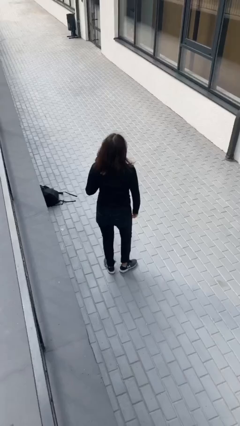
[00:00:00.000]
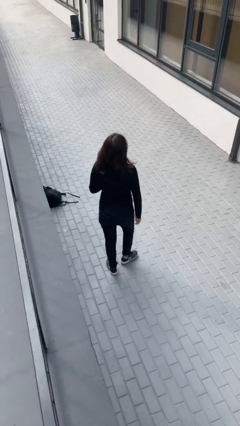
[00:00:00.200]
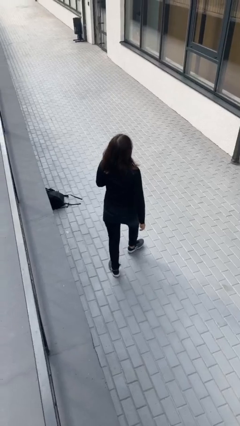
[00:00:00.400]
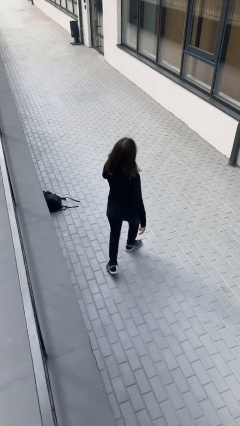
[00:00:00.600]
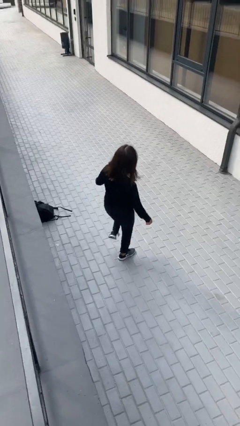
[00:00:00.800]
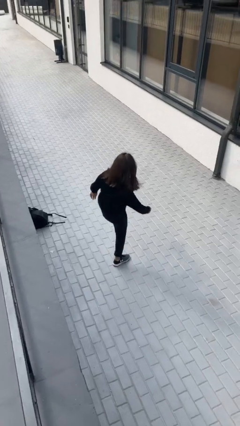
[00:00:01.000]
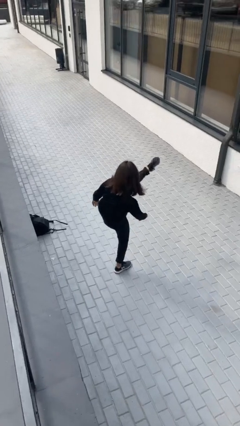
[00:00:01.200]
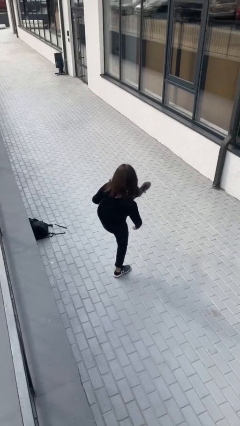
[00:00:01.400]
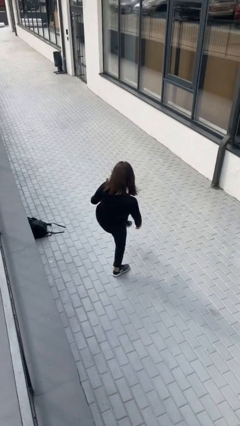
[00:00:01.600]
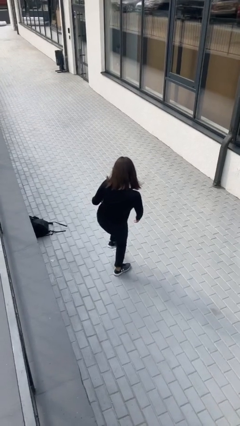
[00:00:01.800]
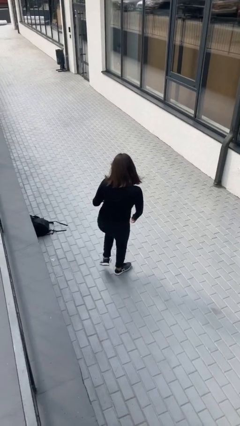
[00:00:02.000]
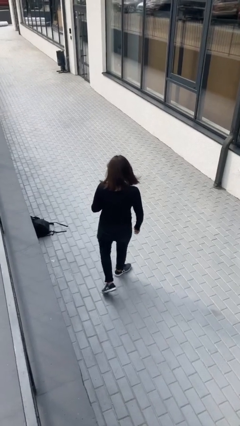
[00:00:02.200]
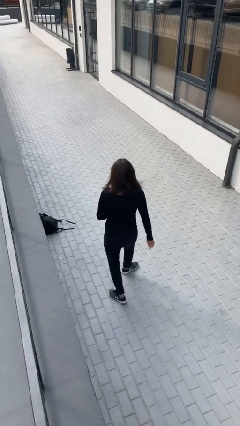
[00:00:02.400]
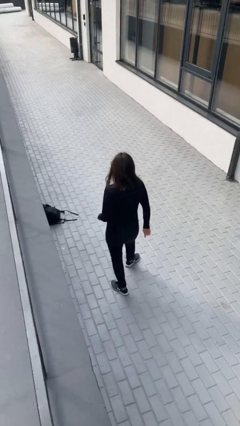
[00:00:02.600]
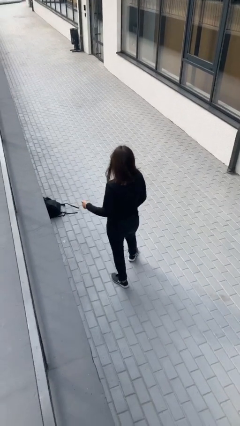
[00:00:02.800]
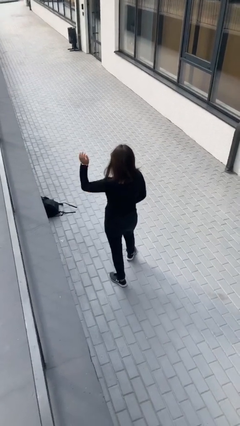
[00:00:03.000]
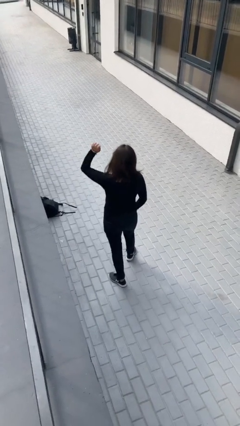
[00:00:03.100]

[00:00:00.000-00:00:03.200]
person karate kicks

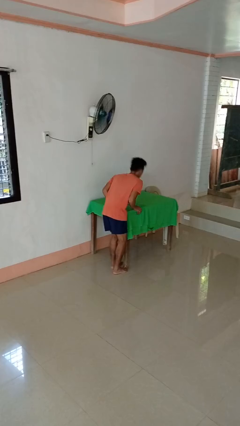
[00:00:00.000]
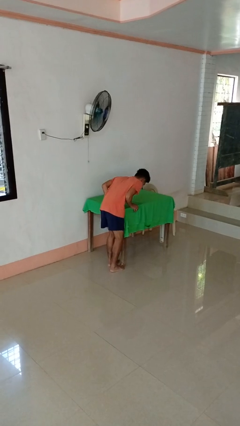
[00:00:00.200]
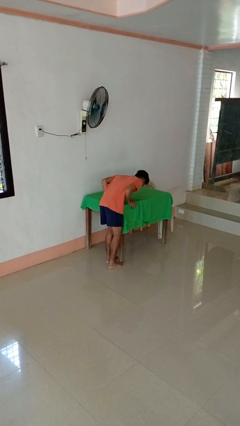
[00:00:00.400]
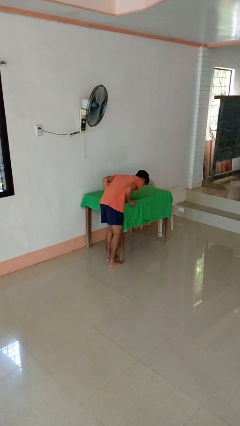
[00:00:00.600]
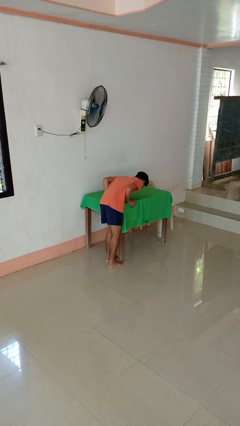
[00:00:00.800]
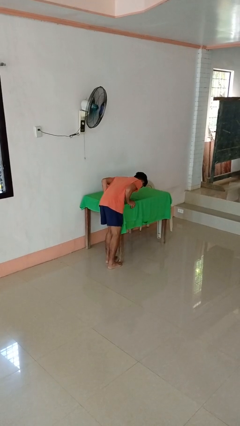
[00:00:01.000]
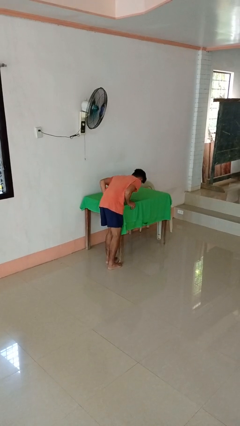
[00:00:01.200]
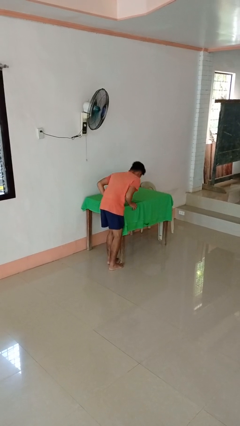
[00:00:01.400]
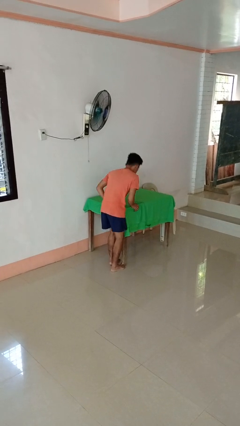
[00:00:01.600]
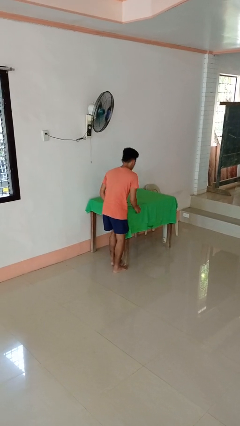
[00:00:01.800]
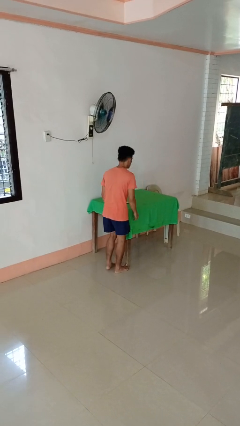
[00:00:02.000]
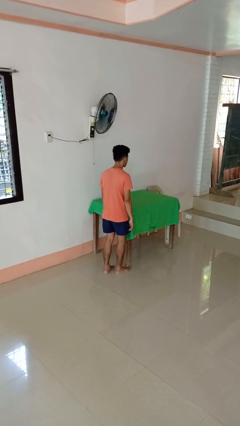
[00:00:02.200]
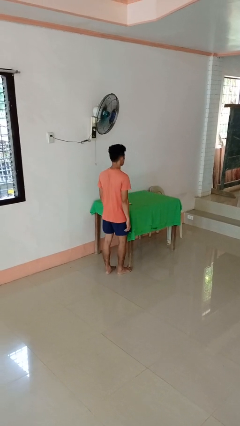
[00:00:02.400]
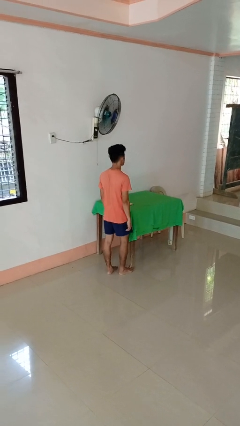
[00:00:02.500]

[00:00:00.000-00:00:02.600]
person stubs toe

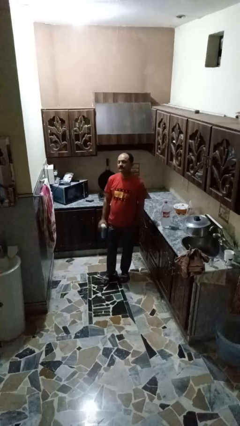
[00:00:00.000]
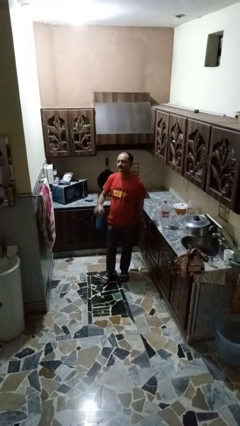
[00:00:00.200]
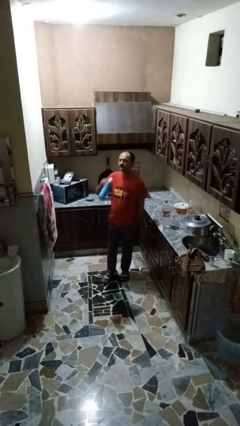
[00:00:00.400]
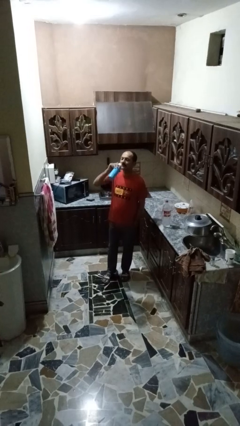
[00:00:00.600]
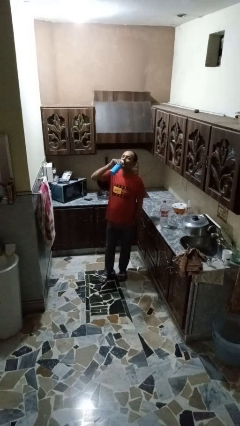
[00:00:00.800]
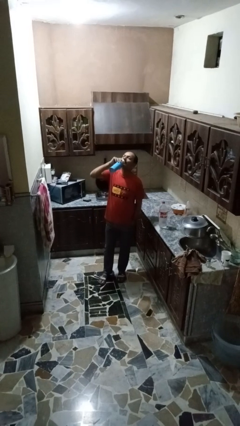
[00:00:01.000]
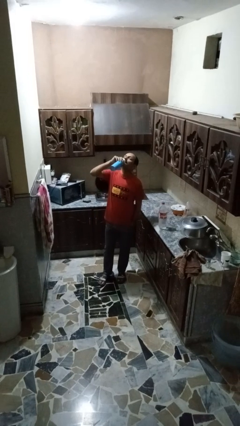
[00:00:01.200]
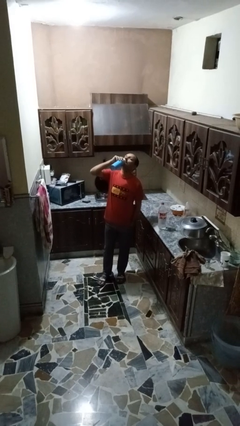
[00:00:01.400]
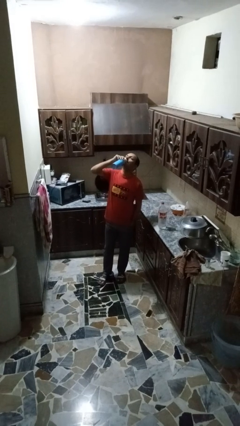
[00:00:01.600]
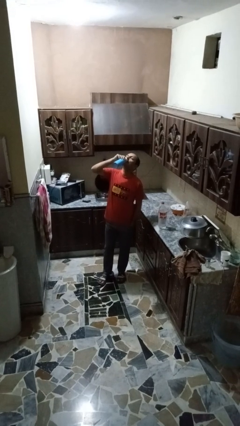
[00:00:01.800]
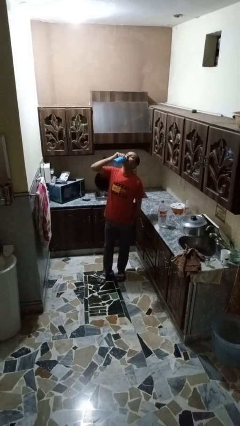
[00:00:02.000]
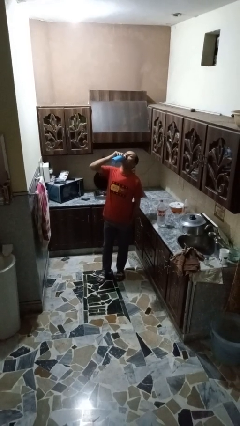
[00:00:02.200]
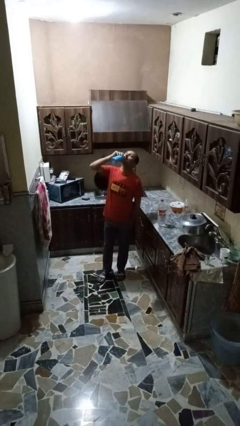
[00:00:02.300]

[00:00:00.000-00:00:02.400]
person drinks from bottle

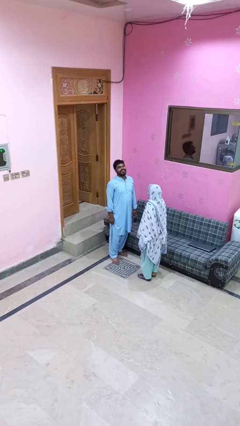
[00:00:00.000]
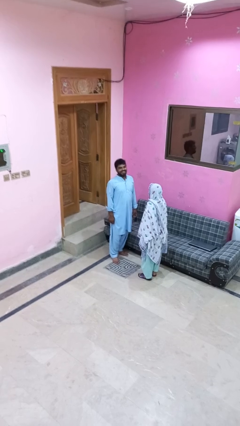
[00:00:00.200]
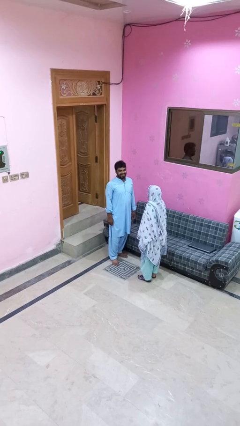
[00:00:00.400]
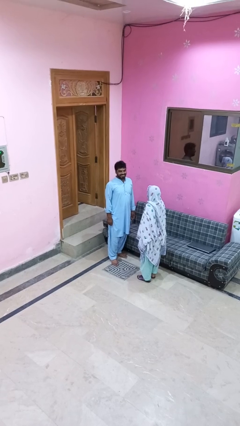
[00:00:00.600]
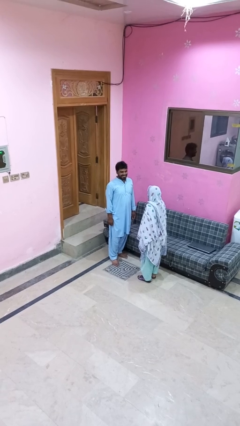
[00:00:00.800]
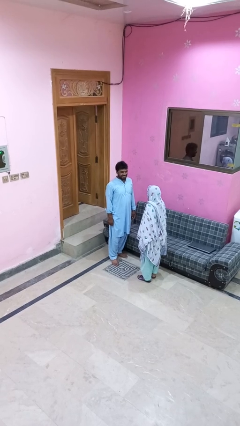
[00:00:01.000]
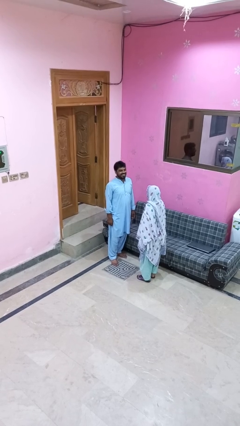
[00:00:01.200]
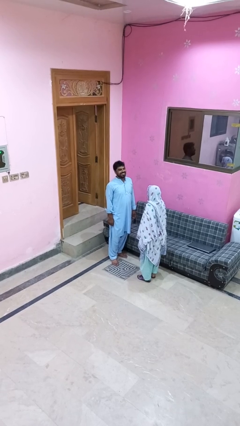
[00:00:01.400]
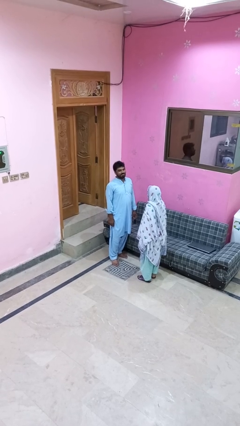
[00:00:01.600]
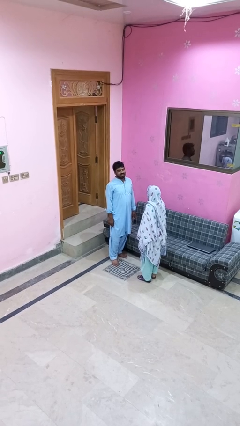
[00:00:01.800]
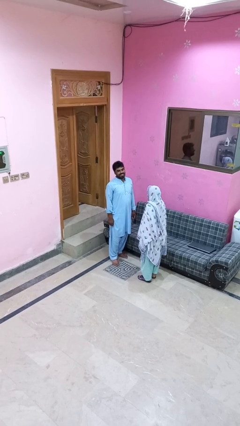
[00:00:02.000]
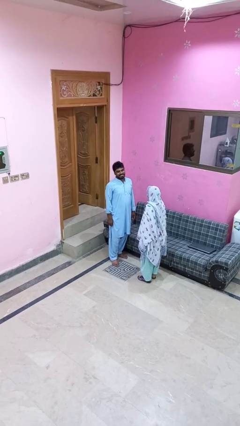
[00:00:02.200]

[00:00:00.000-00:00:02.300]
person laughs with person

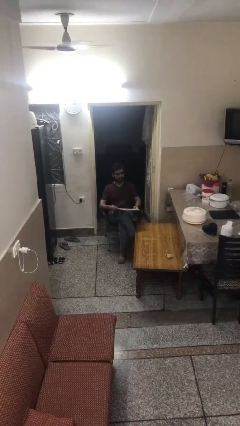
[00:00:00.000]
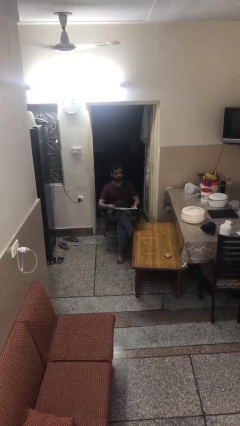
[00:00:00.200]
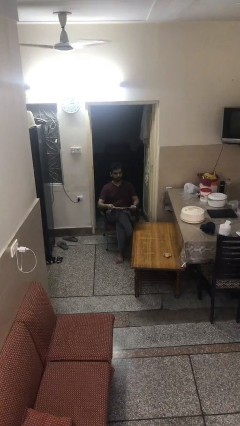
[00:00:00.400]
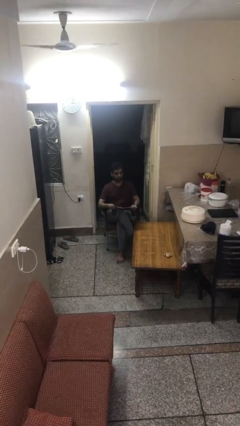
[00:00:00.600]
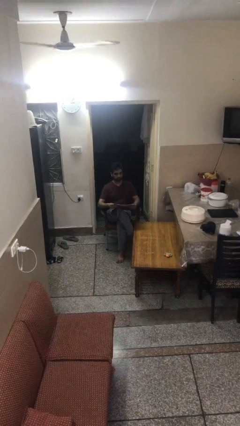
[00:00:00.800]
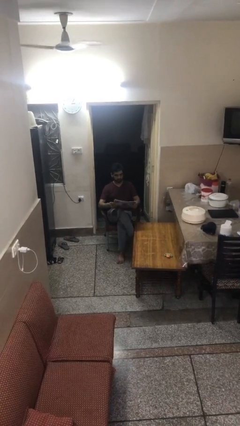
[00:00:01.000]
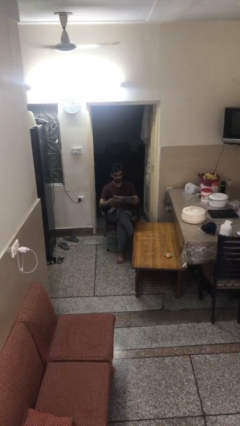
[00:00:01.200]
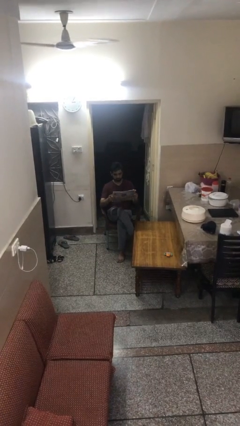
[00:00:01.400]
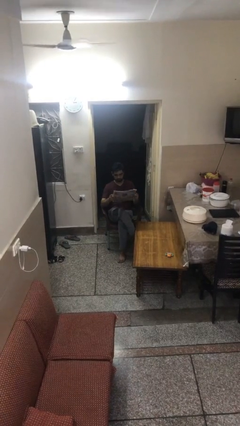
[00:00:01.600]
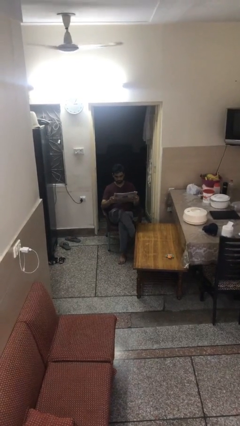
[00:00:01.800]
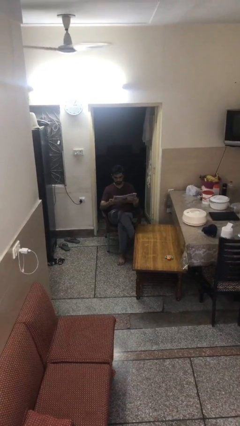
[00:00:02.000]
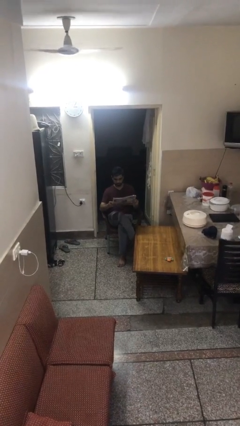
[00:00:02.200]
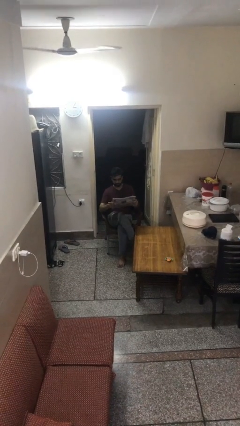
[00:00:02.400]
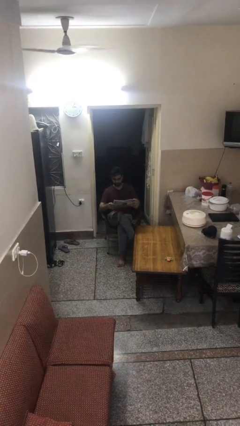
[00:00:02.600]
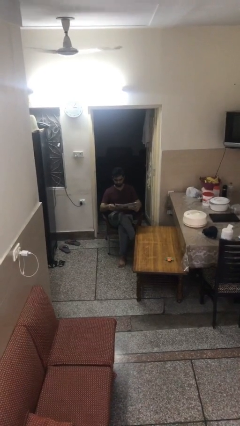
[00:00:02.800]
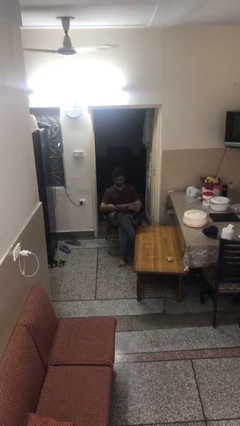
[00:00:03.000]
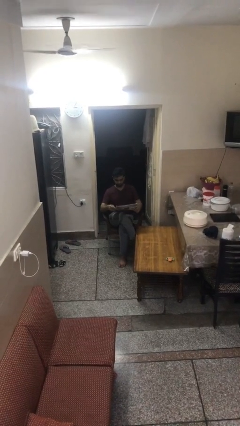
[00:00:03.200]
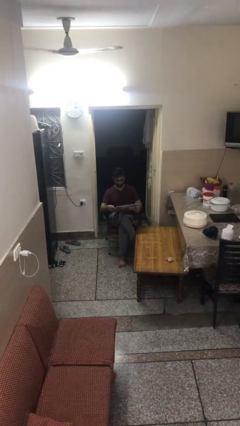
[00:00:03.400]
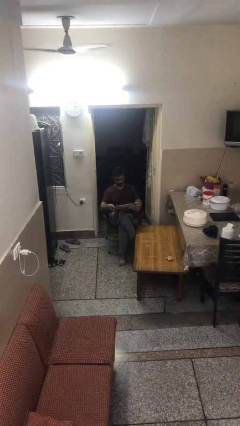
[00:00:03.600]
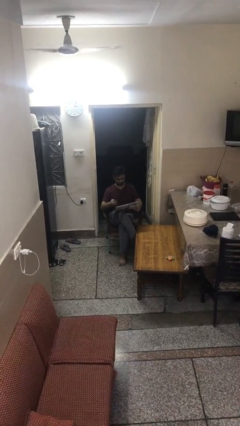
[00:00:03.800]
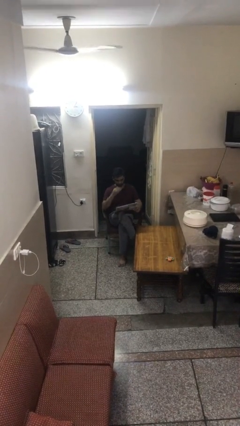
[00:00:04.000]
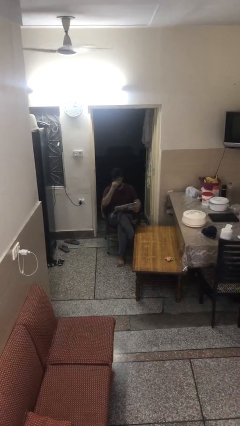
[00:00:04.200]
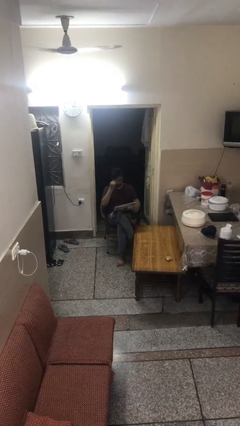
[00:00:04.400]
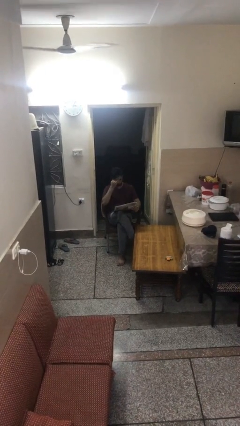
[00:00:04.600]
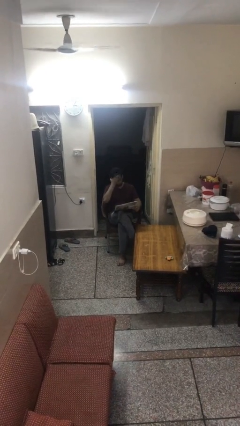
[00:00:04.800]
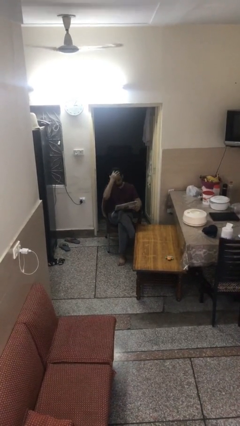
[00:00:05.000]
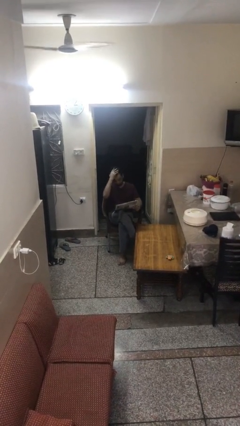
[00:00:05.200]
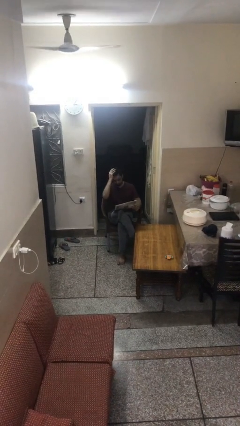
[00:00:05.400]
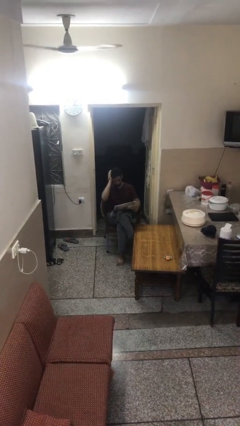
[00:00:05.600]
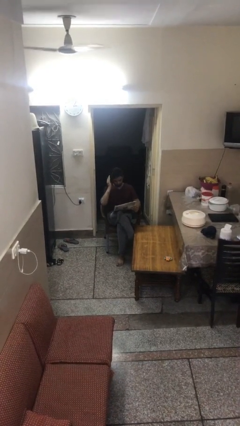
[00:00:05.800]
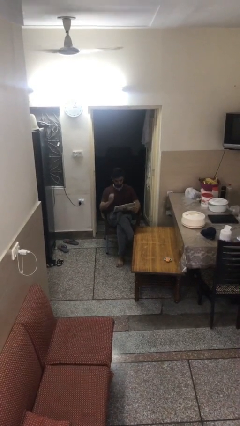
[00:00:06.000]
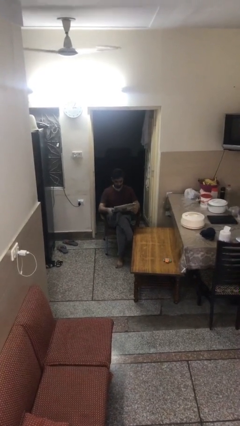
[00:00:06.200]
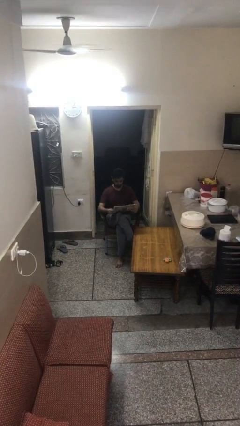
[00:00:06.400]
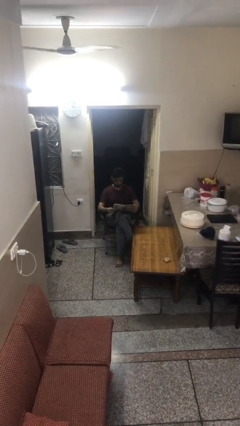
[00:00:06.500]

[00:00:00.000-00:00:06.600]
person reads document
